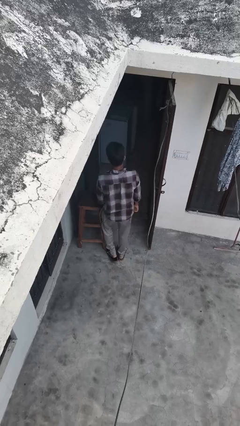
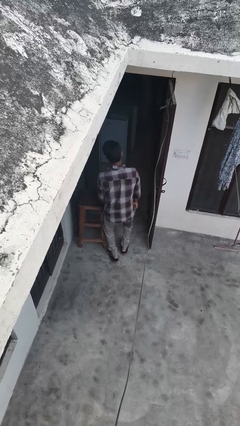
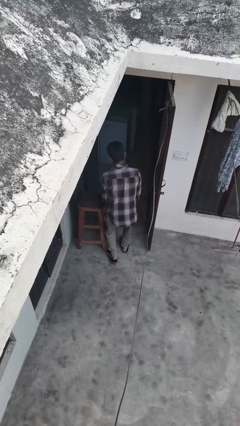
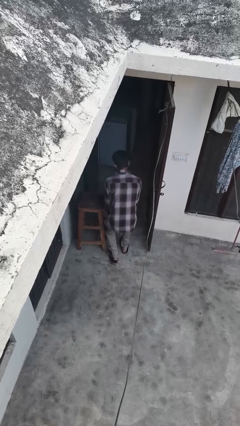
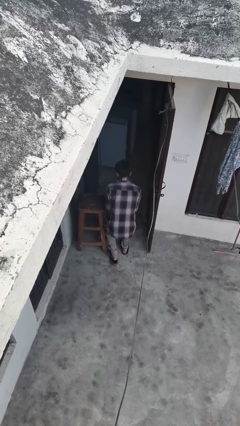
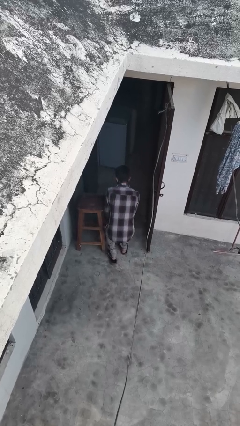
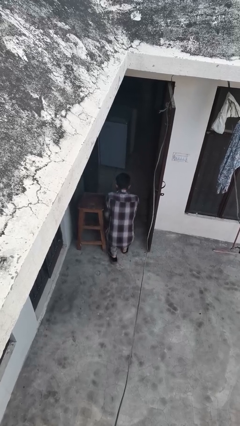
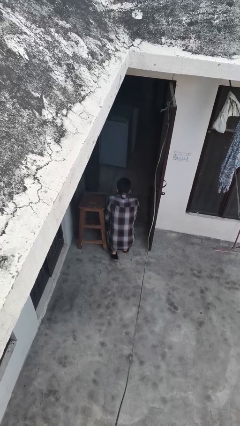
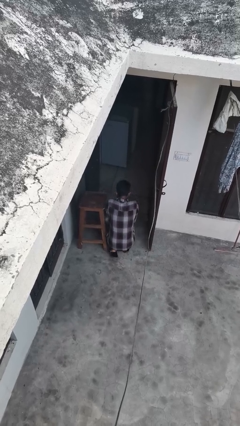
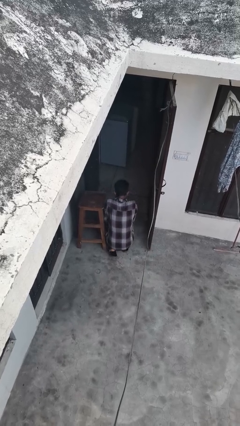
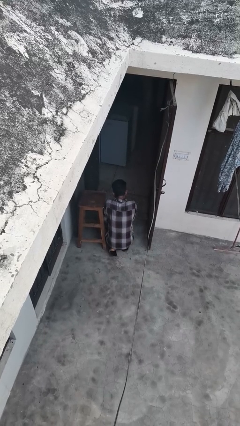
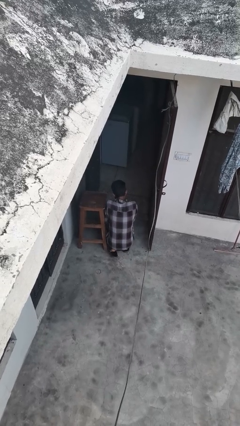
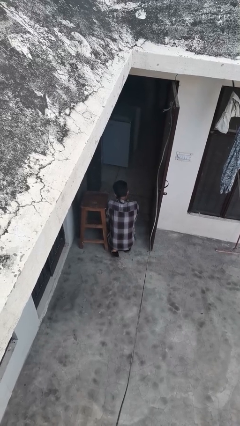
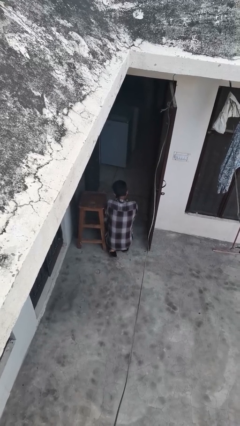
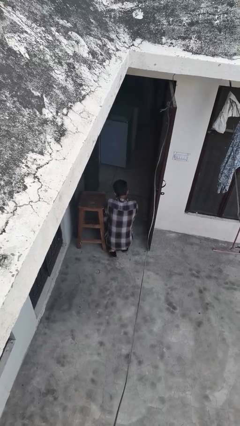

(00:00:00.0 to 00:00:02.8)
person trips on object on floor

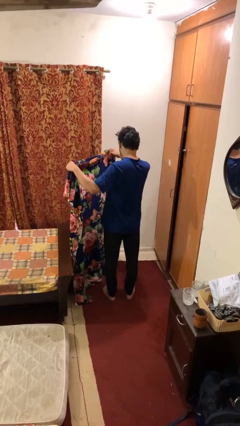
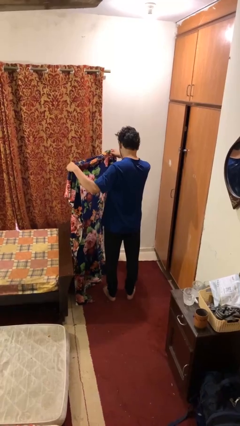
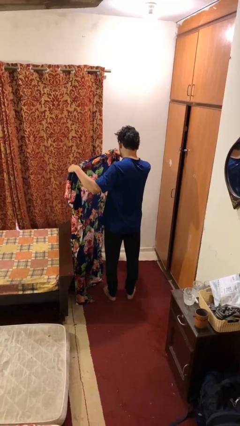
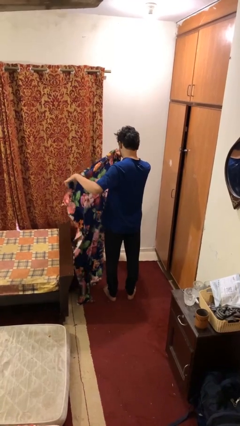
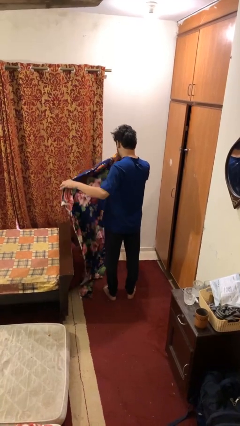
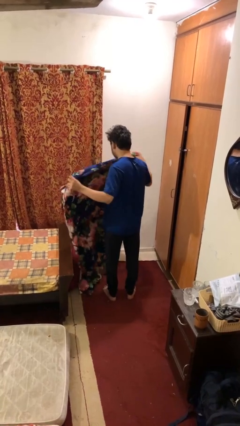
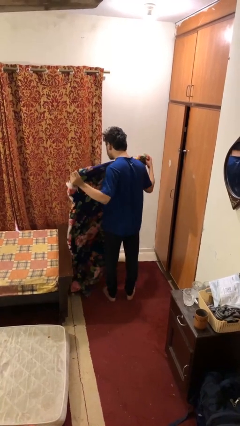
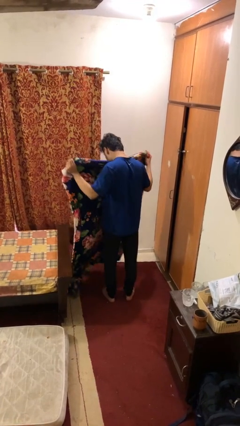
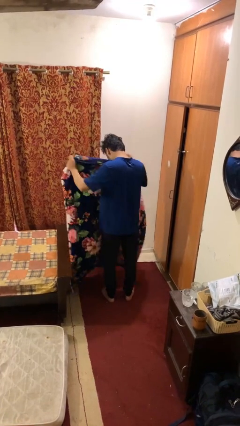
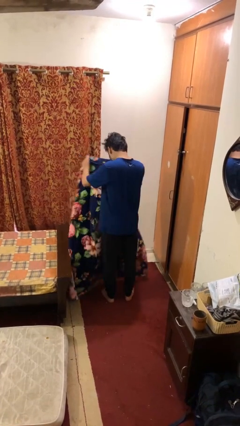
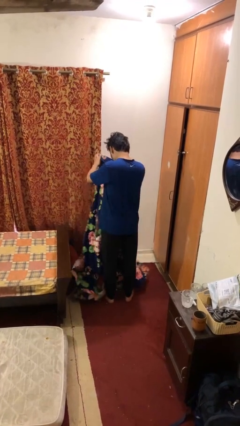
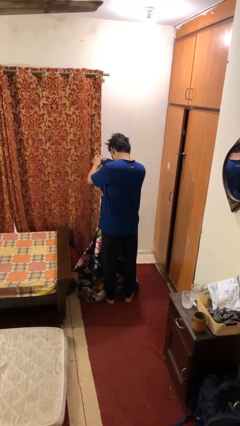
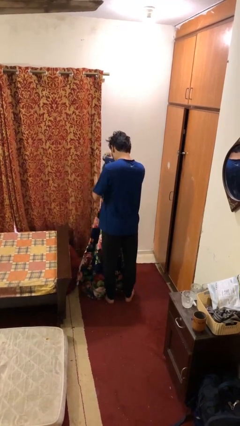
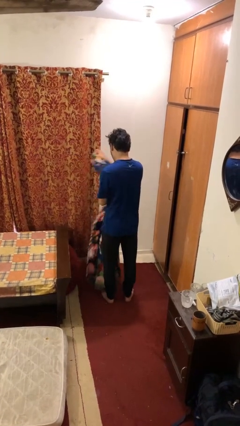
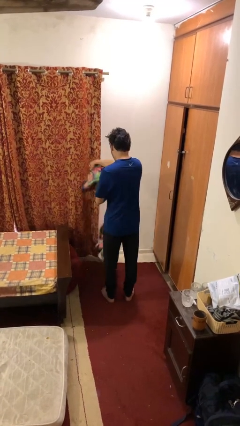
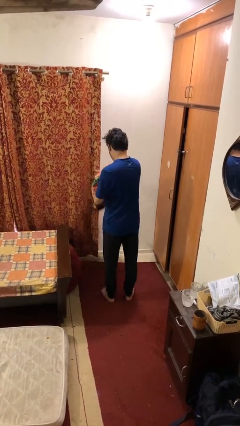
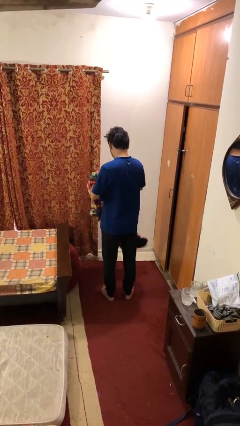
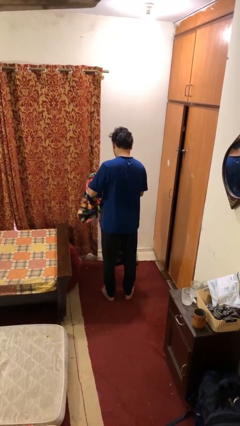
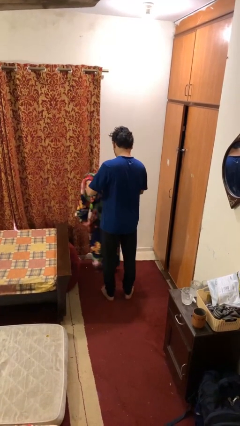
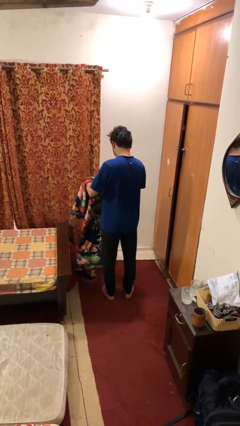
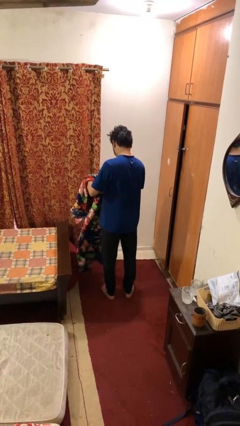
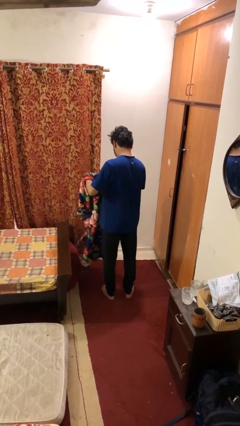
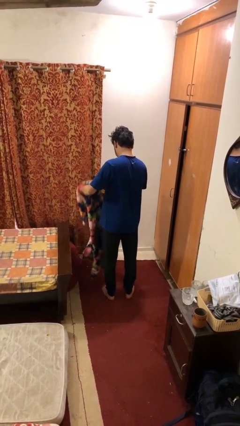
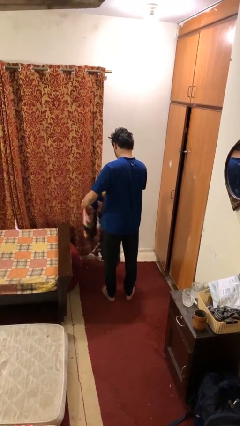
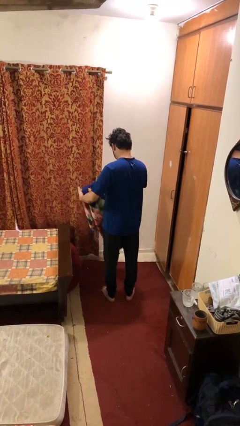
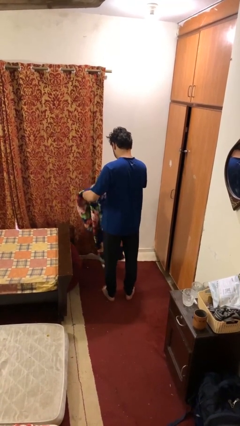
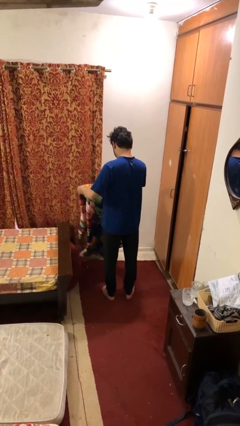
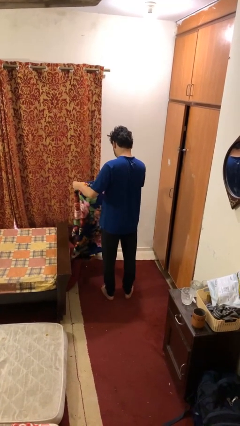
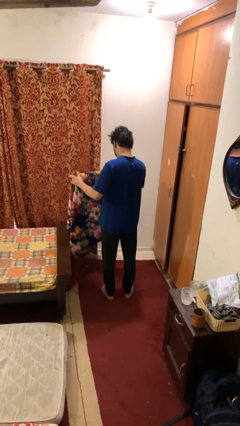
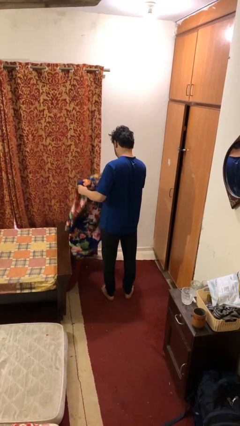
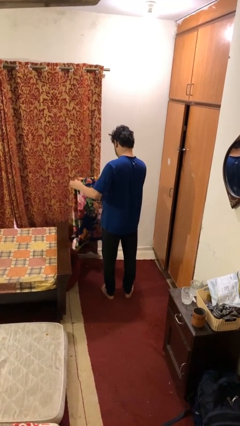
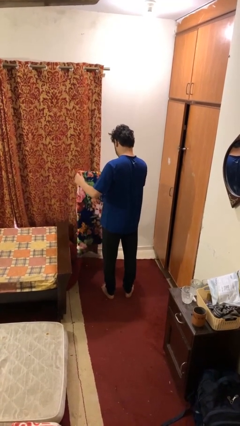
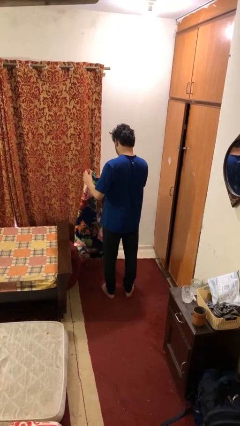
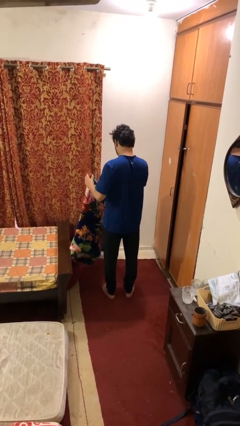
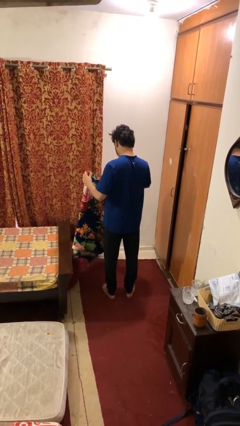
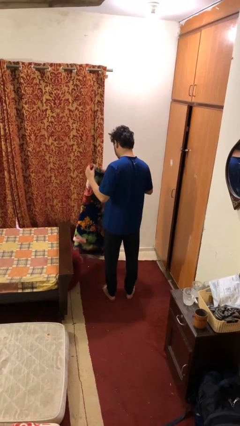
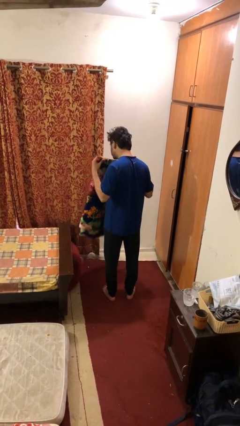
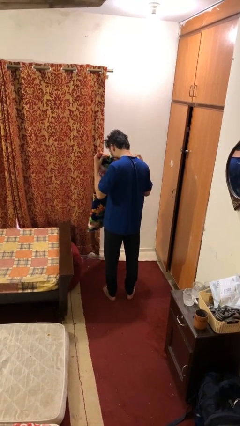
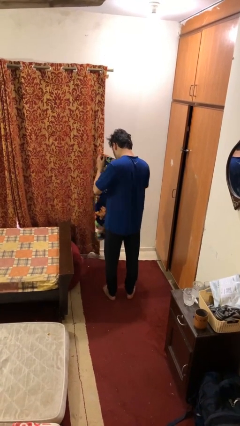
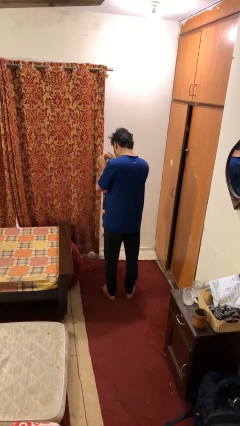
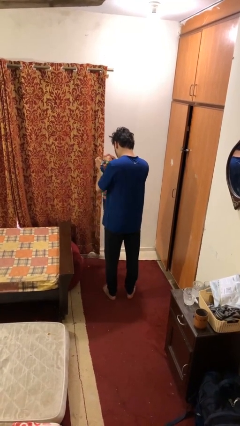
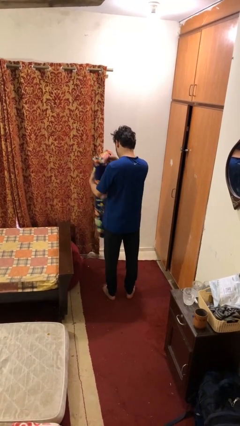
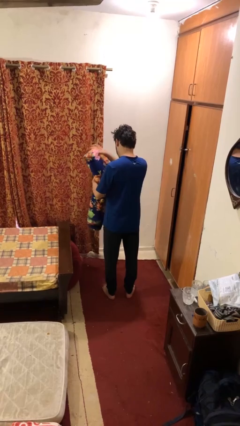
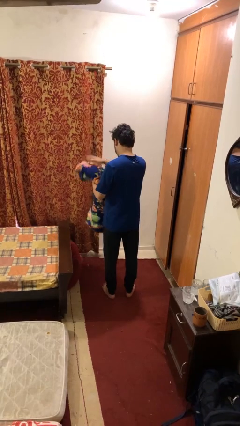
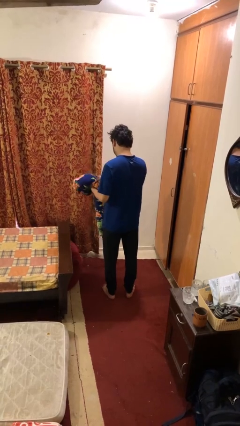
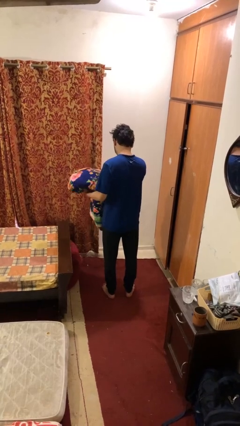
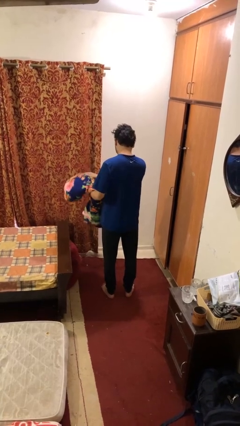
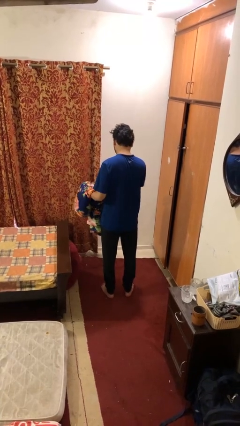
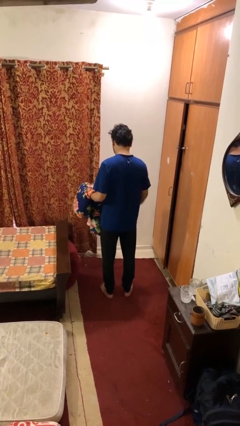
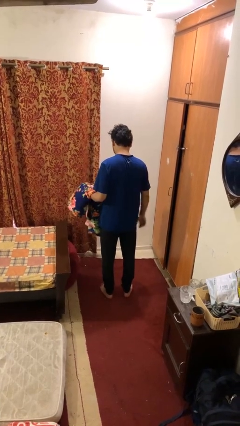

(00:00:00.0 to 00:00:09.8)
person folds blanket

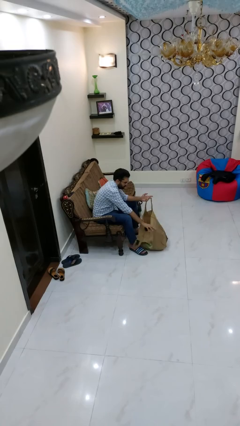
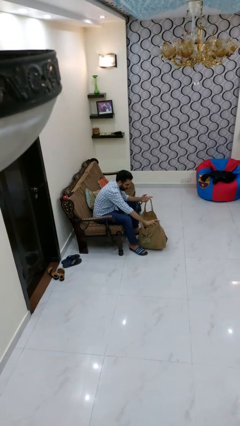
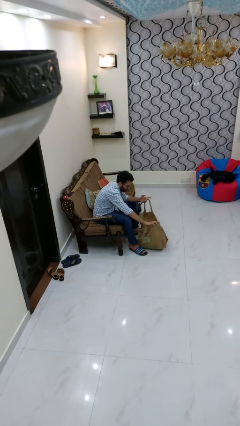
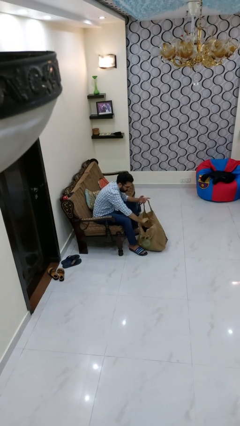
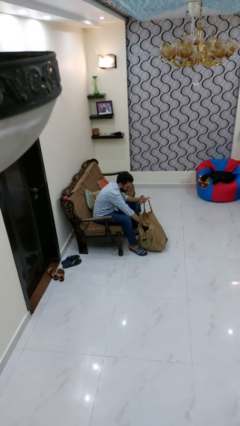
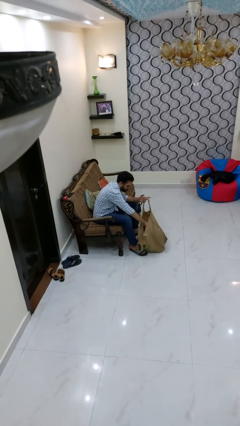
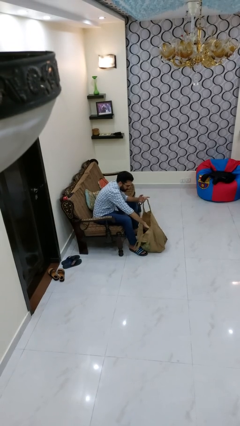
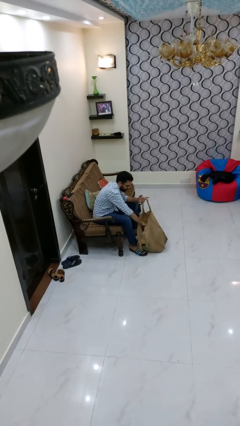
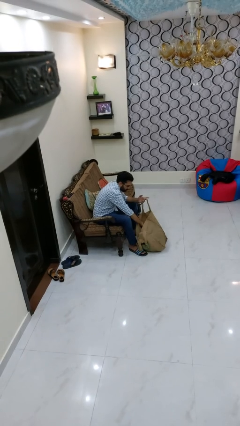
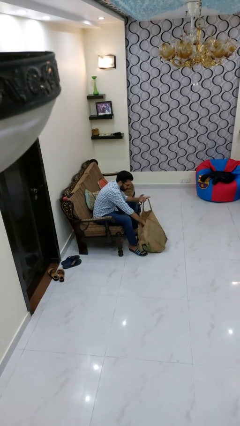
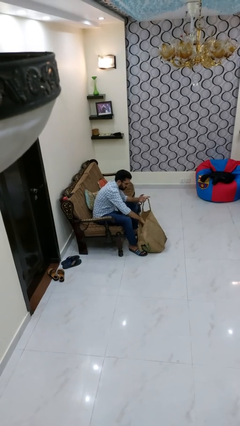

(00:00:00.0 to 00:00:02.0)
person searches in bag

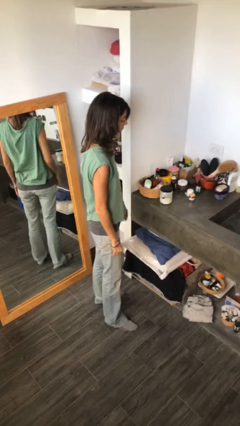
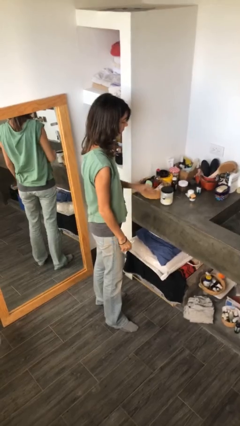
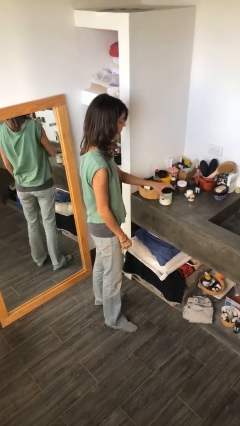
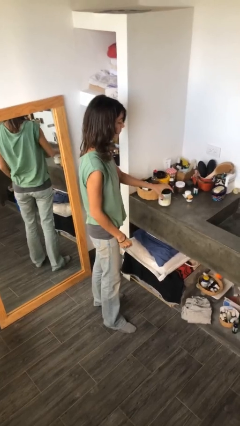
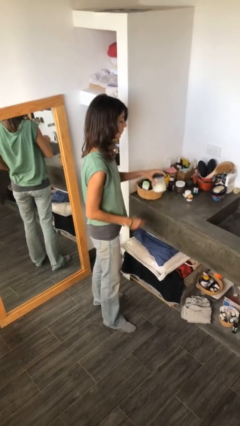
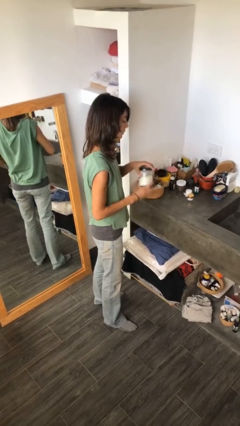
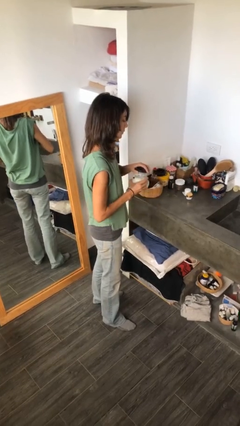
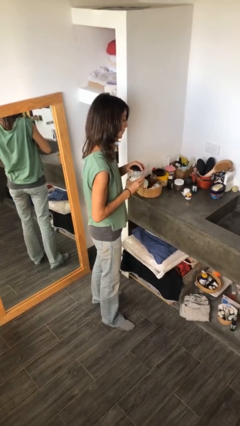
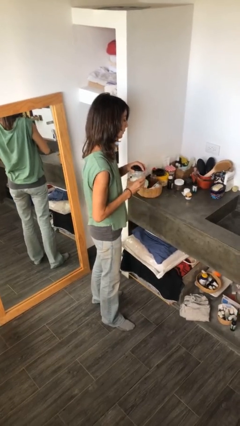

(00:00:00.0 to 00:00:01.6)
person picks up object from countertop

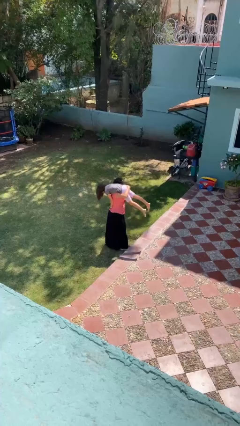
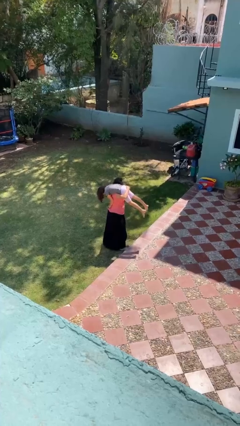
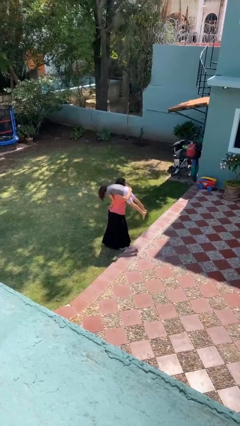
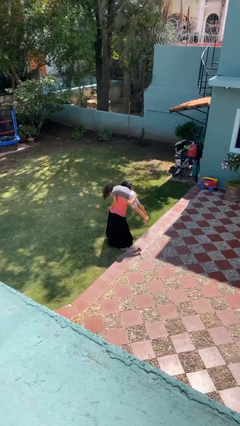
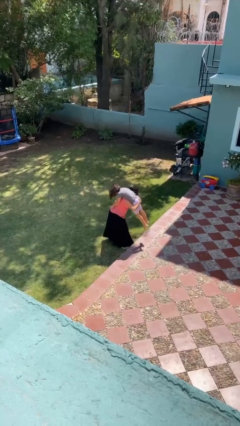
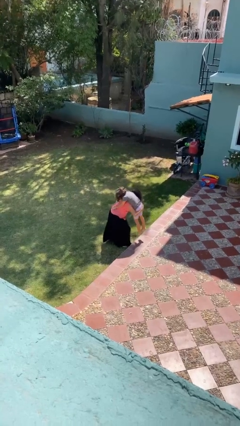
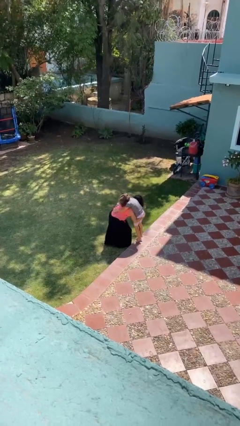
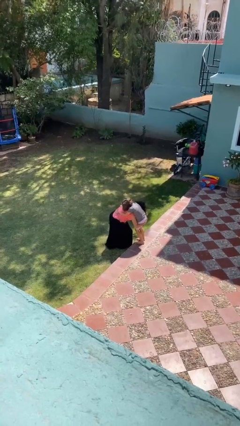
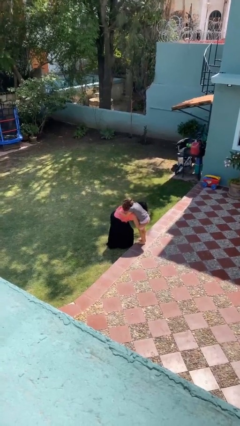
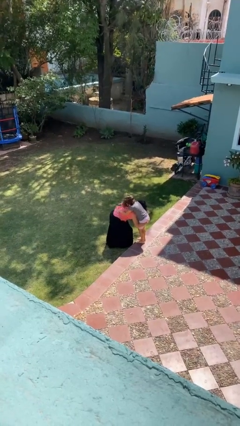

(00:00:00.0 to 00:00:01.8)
person puts down person
